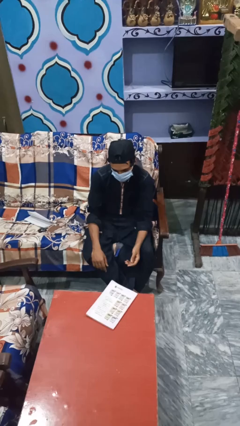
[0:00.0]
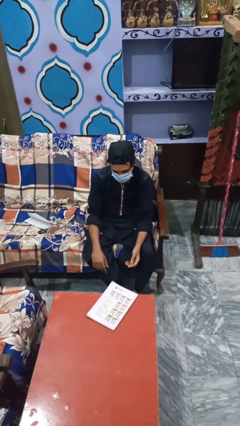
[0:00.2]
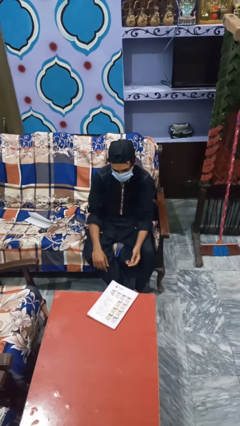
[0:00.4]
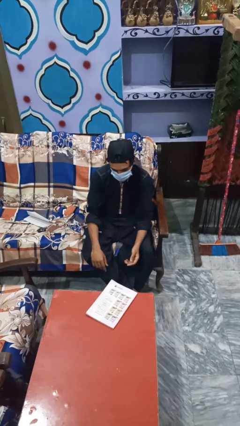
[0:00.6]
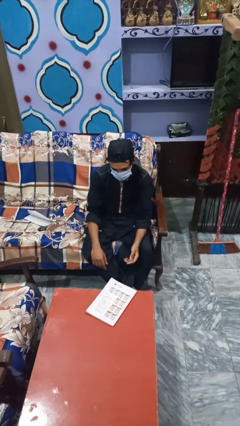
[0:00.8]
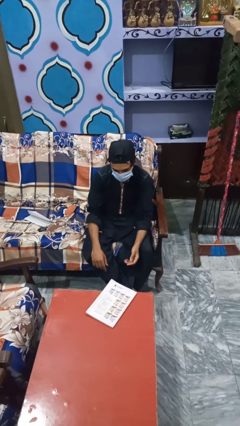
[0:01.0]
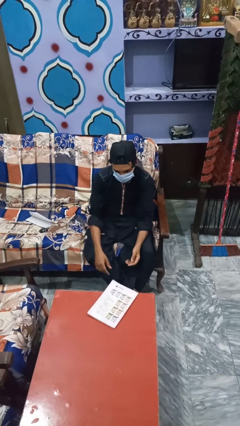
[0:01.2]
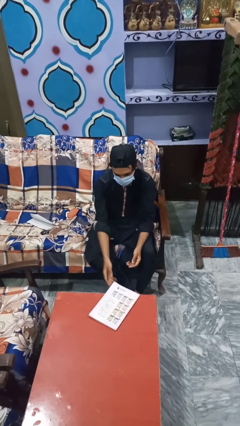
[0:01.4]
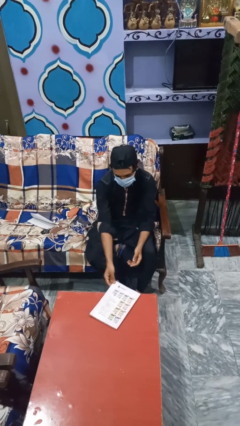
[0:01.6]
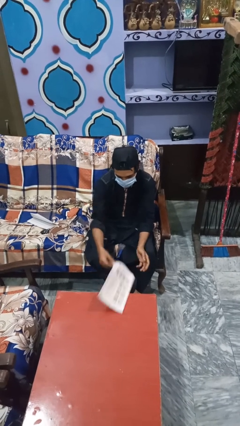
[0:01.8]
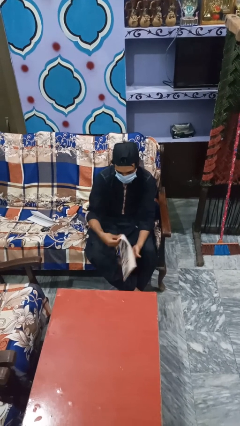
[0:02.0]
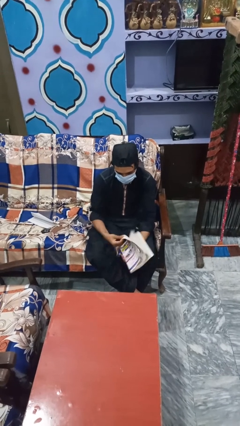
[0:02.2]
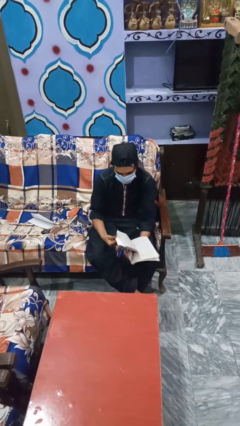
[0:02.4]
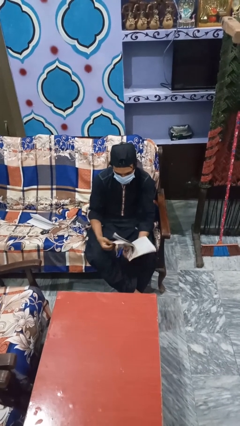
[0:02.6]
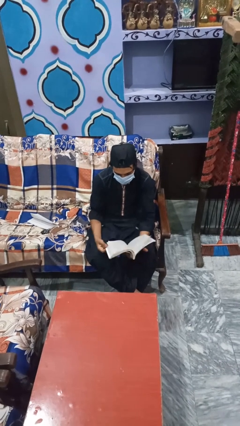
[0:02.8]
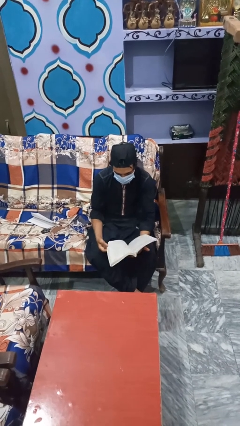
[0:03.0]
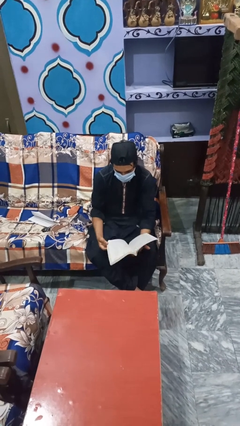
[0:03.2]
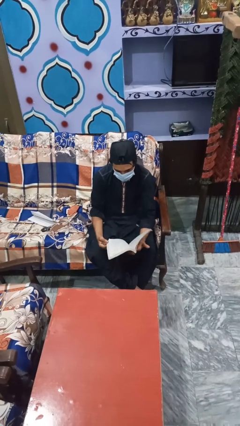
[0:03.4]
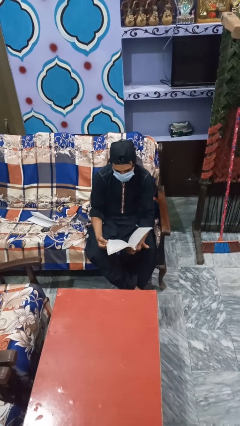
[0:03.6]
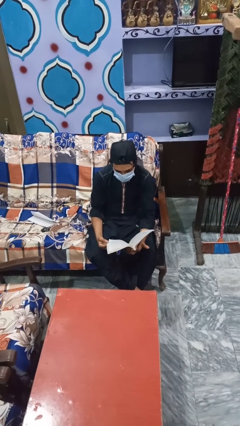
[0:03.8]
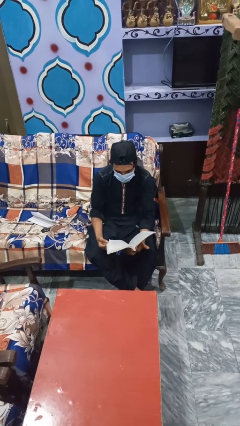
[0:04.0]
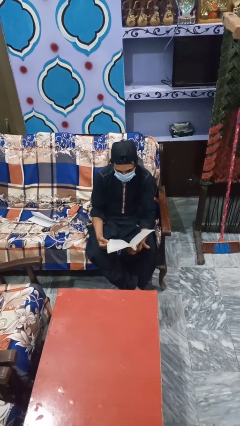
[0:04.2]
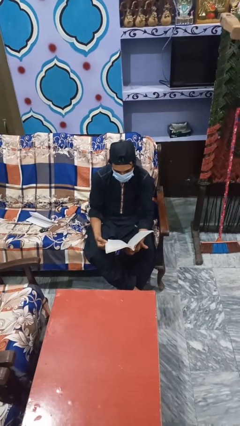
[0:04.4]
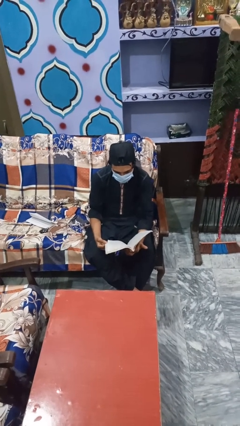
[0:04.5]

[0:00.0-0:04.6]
person reads magazine

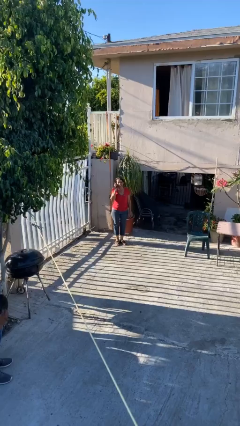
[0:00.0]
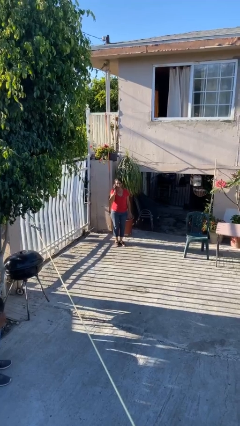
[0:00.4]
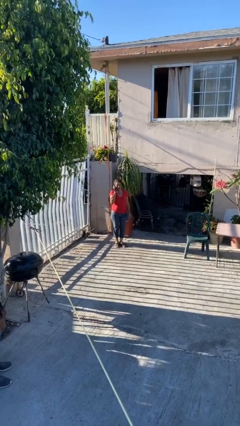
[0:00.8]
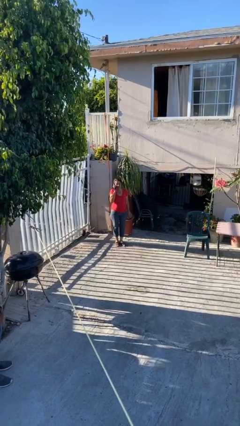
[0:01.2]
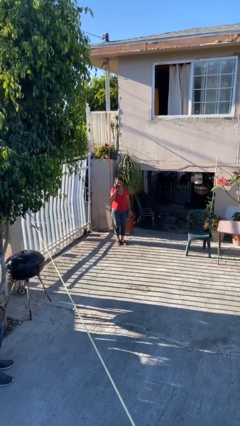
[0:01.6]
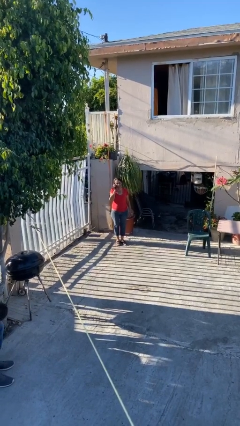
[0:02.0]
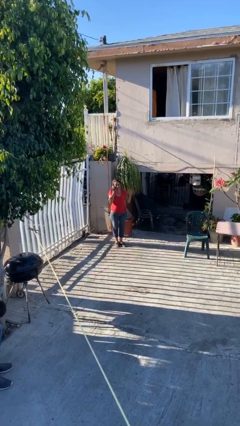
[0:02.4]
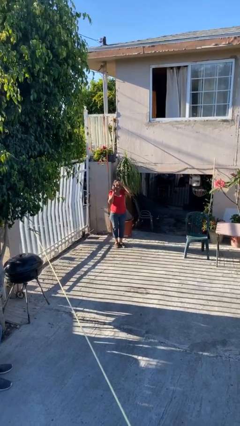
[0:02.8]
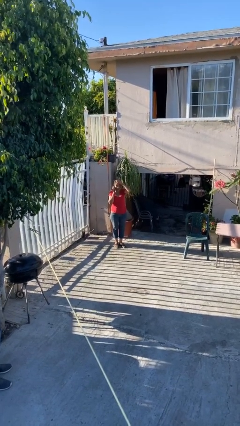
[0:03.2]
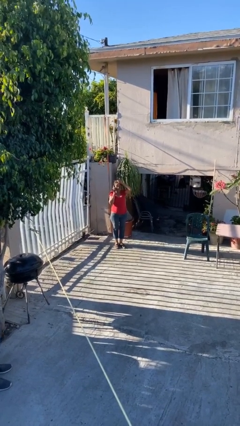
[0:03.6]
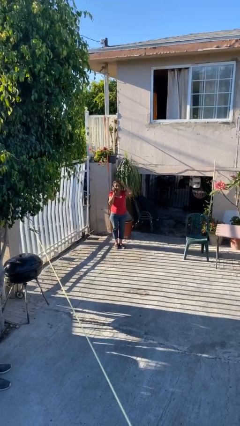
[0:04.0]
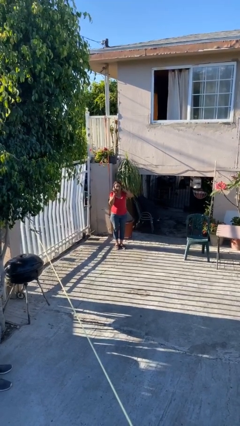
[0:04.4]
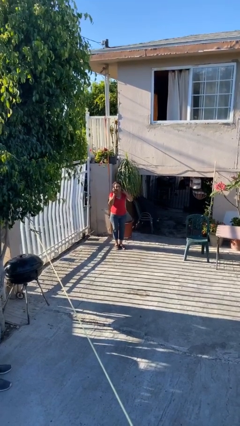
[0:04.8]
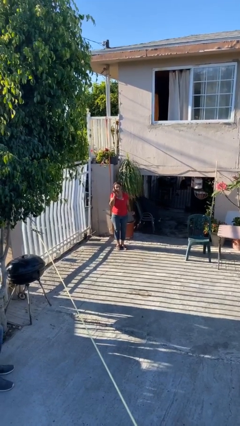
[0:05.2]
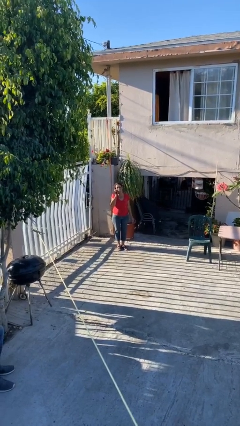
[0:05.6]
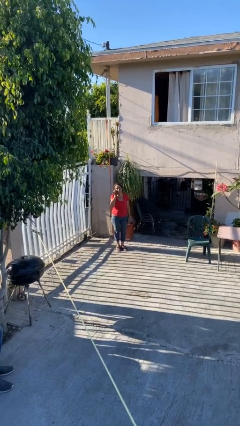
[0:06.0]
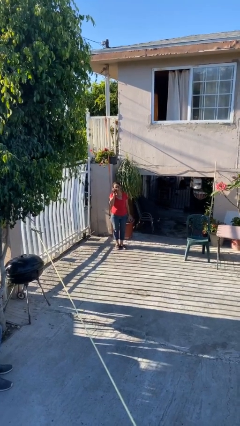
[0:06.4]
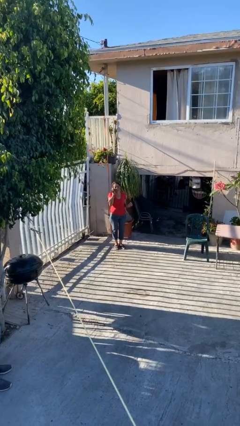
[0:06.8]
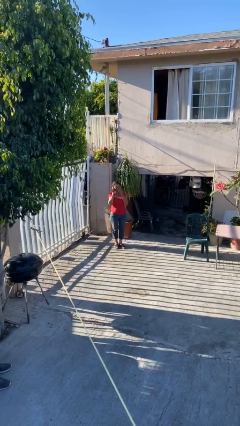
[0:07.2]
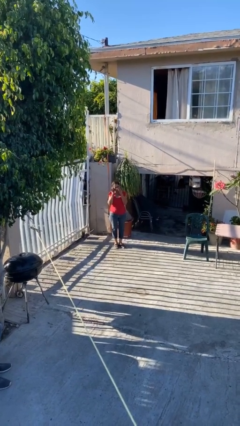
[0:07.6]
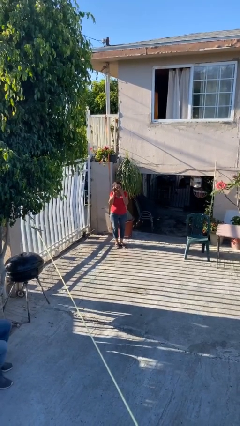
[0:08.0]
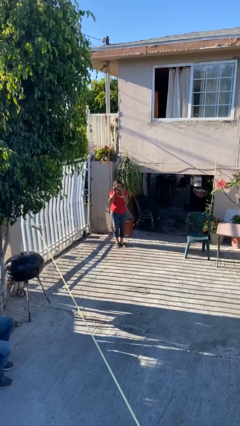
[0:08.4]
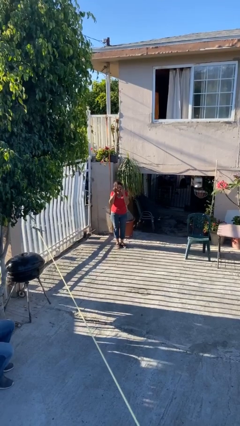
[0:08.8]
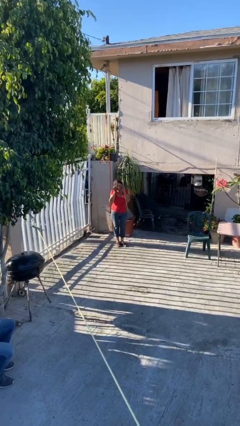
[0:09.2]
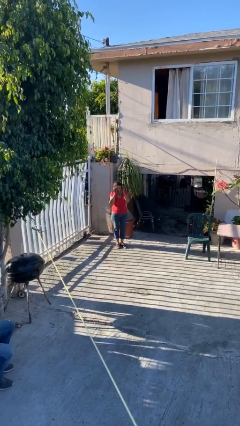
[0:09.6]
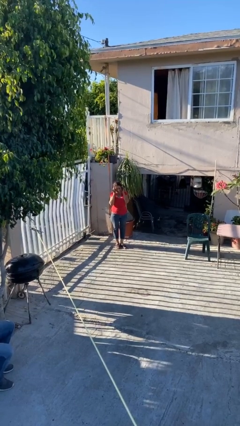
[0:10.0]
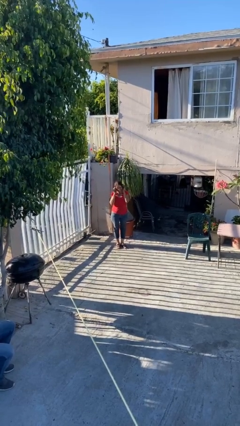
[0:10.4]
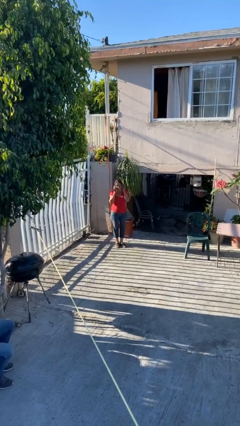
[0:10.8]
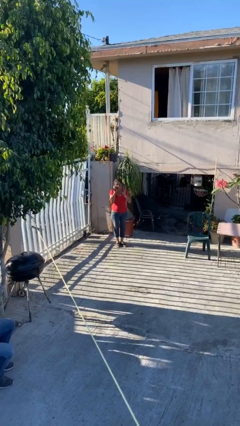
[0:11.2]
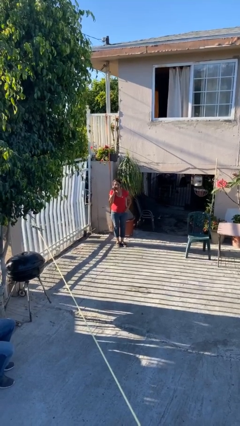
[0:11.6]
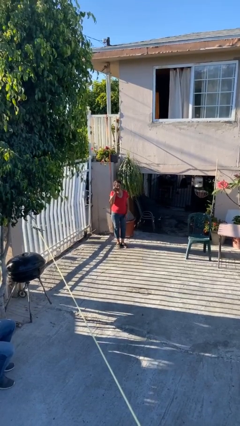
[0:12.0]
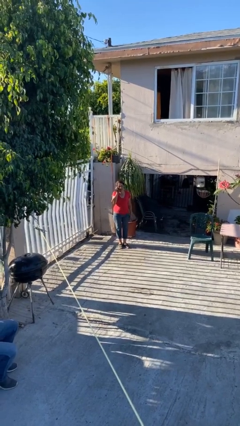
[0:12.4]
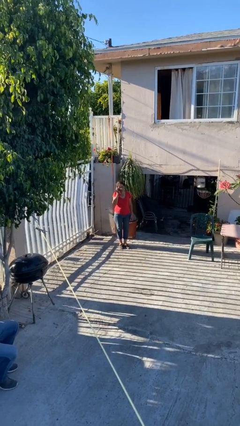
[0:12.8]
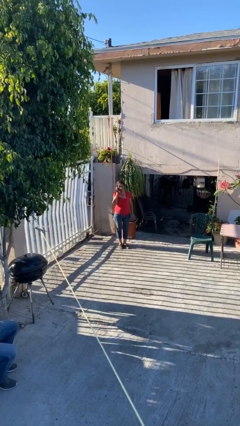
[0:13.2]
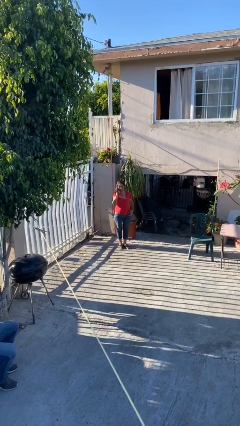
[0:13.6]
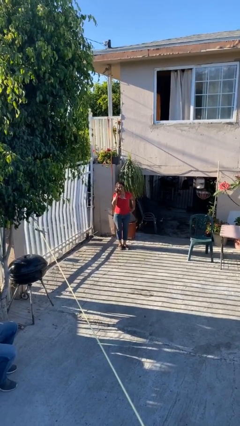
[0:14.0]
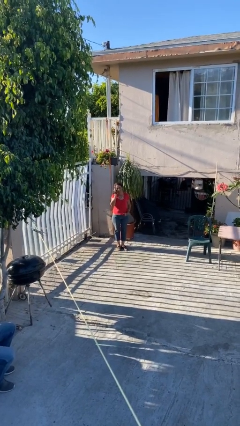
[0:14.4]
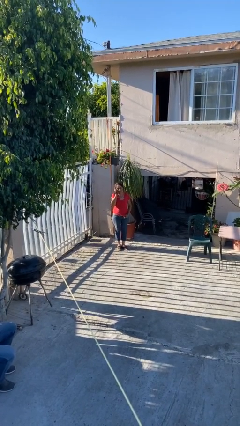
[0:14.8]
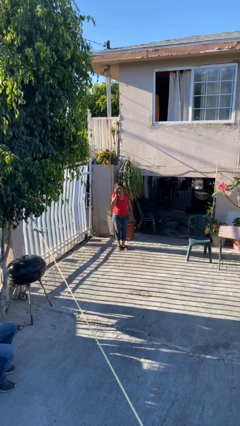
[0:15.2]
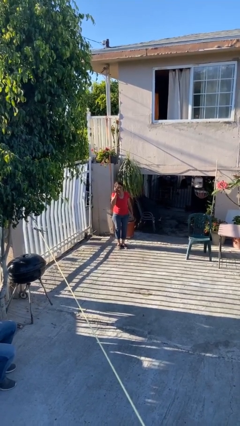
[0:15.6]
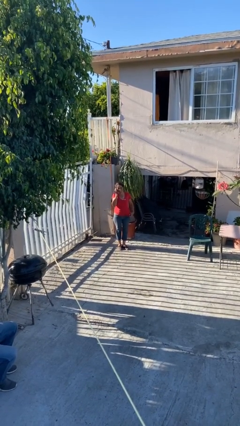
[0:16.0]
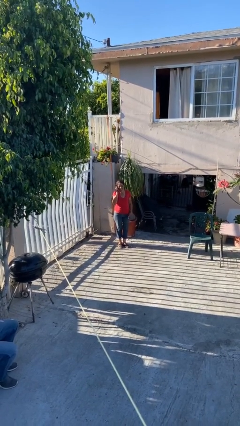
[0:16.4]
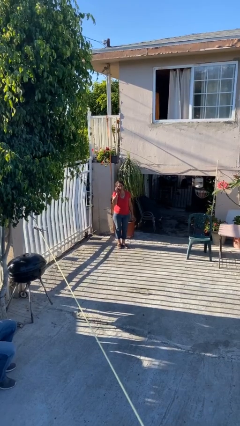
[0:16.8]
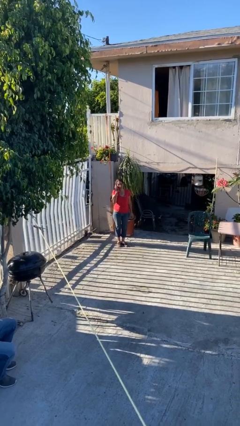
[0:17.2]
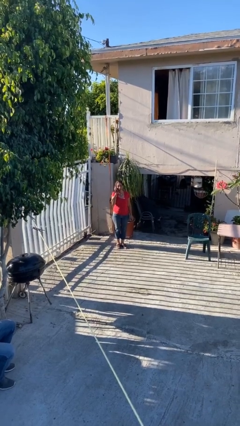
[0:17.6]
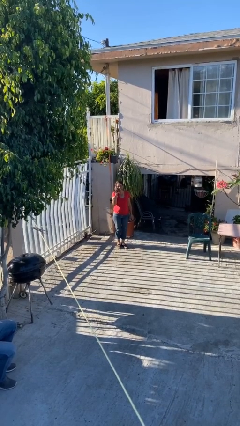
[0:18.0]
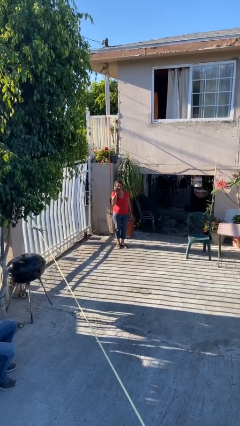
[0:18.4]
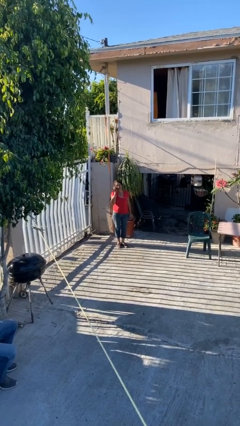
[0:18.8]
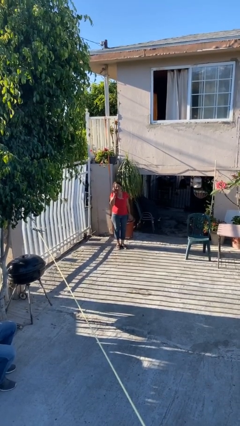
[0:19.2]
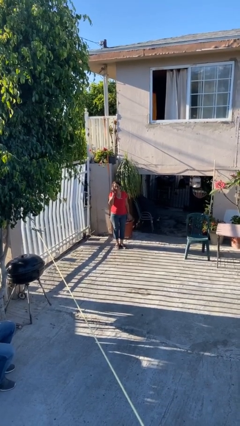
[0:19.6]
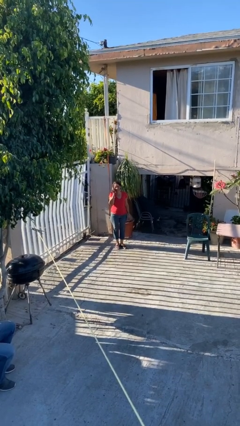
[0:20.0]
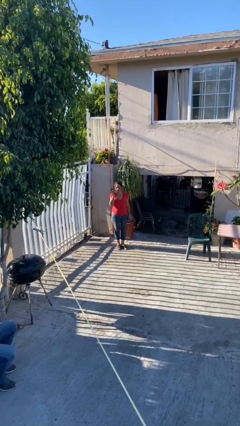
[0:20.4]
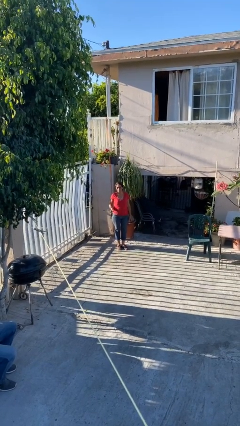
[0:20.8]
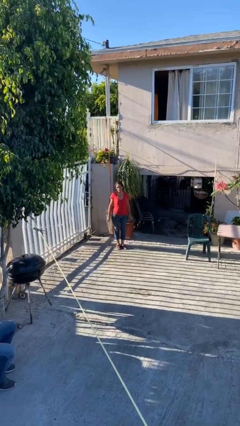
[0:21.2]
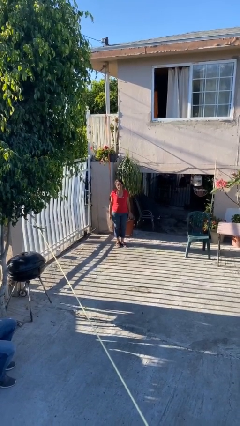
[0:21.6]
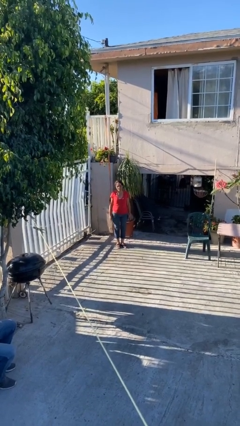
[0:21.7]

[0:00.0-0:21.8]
person talks on phone

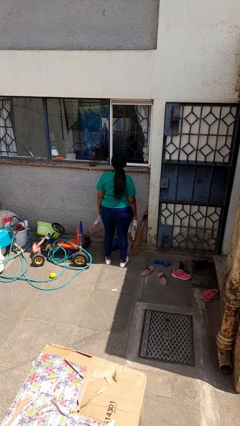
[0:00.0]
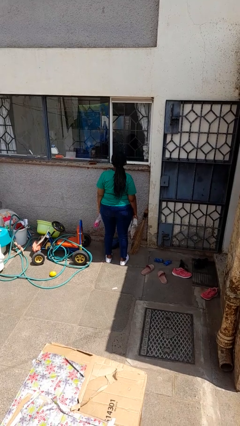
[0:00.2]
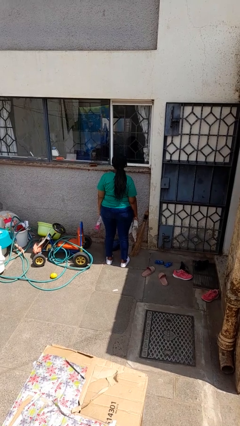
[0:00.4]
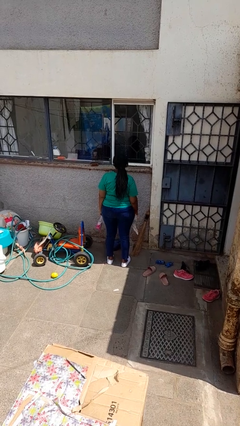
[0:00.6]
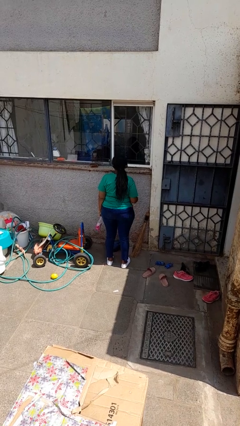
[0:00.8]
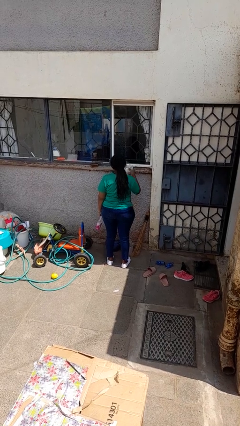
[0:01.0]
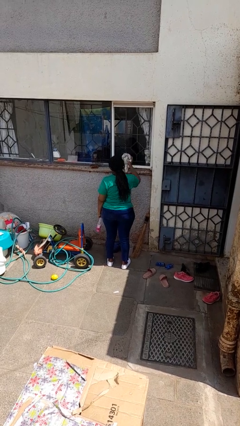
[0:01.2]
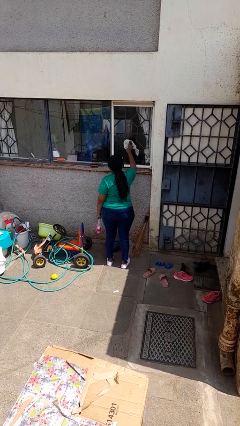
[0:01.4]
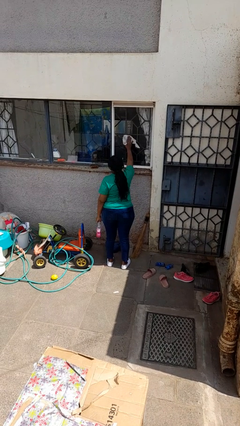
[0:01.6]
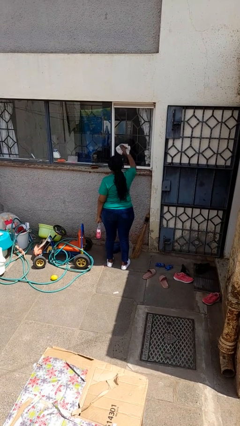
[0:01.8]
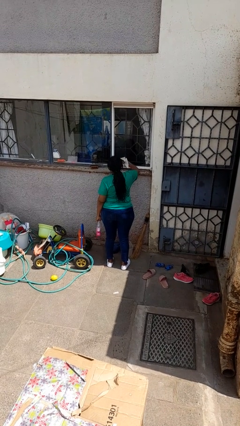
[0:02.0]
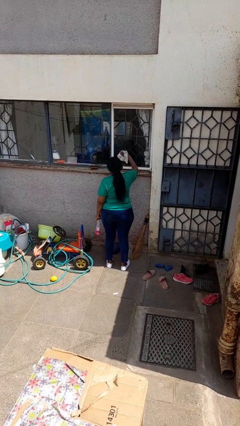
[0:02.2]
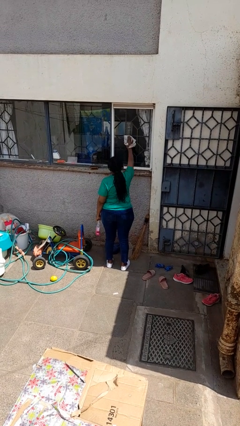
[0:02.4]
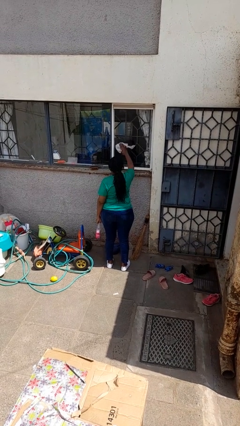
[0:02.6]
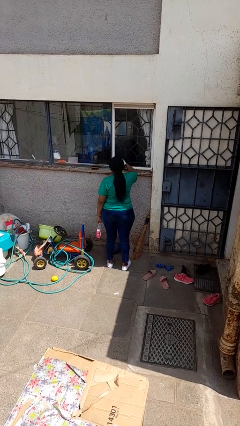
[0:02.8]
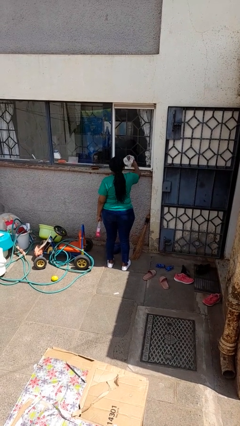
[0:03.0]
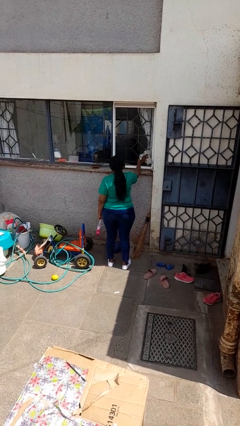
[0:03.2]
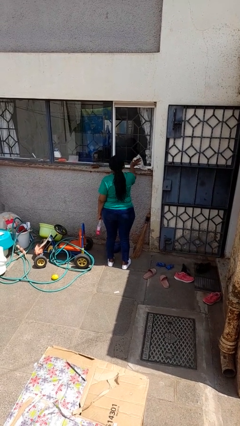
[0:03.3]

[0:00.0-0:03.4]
person washes window
